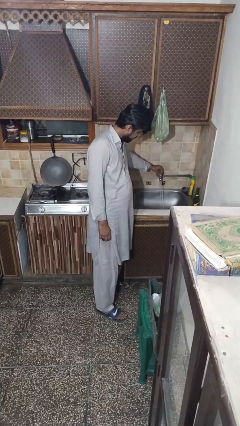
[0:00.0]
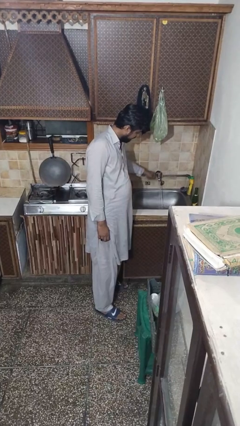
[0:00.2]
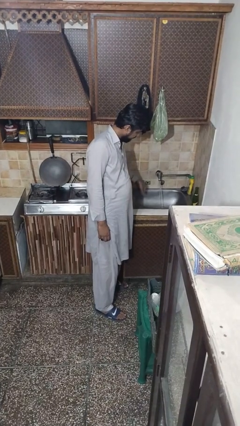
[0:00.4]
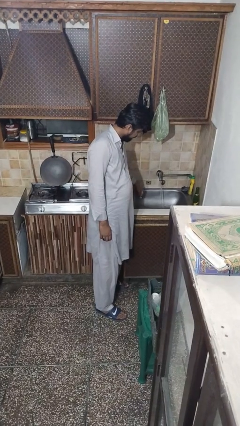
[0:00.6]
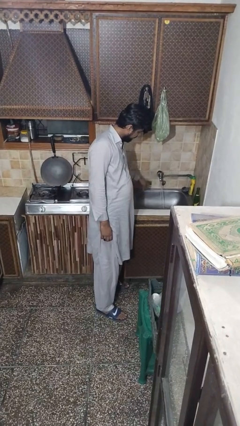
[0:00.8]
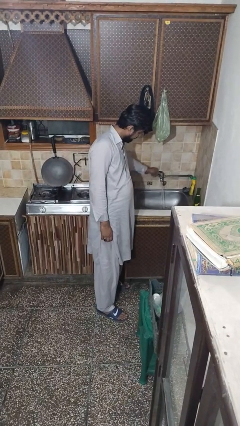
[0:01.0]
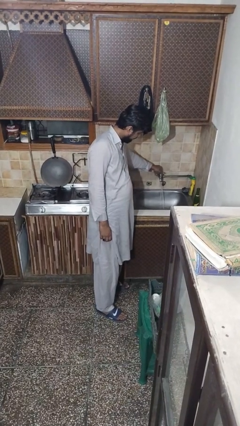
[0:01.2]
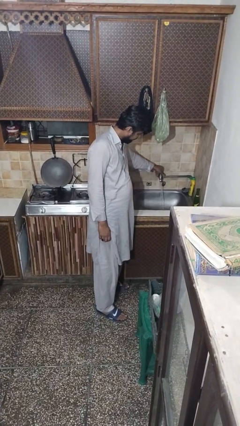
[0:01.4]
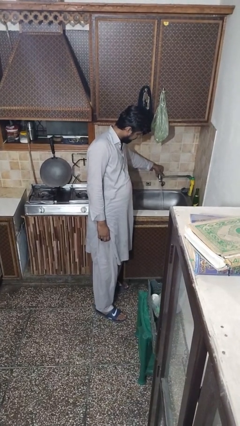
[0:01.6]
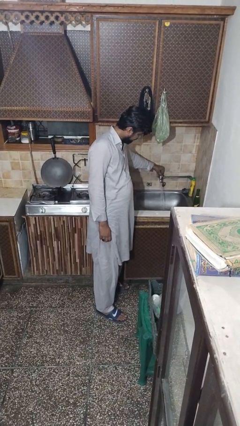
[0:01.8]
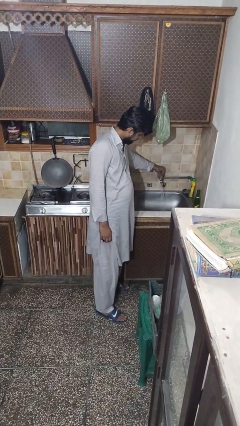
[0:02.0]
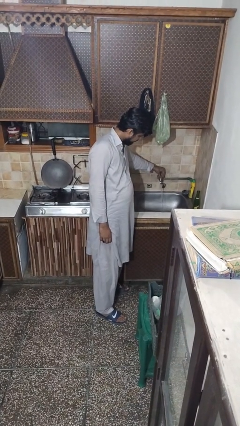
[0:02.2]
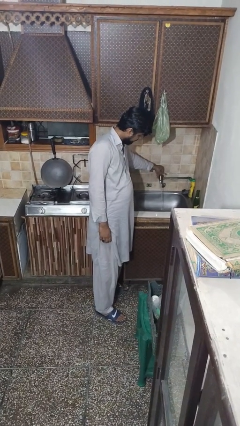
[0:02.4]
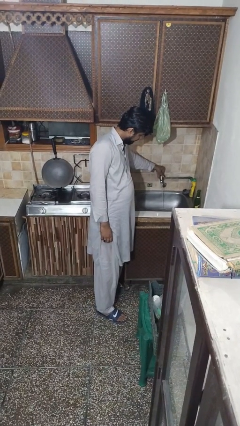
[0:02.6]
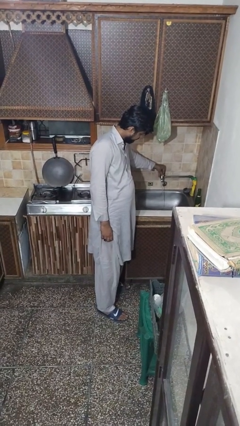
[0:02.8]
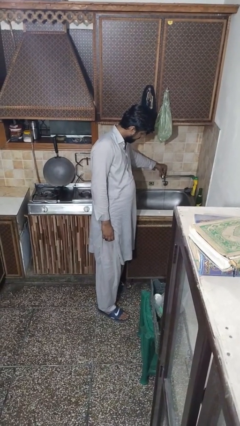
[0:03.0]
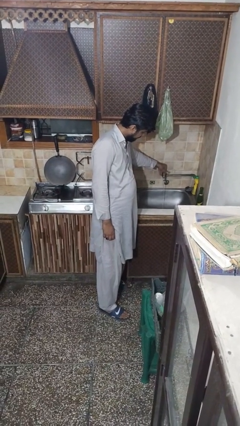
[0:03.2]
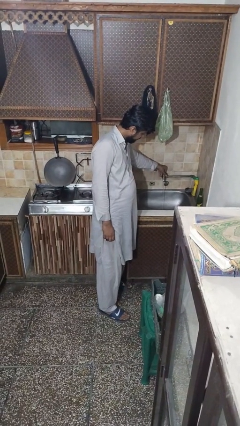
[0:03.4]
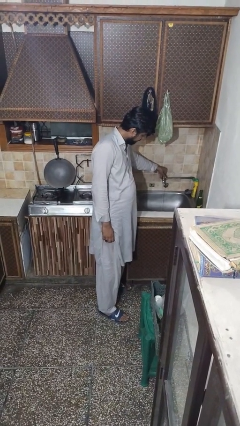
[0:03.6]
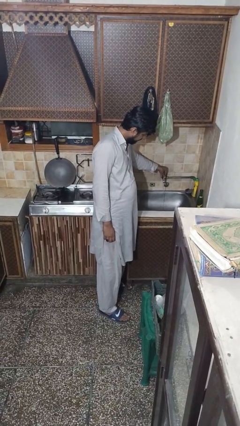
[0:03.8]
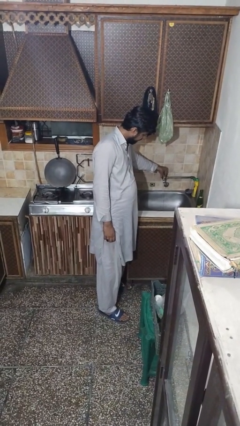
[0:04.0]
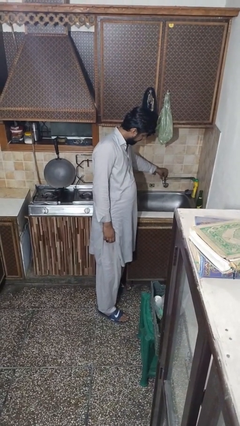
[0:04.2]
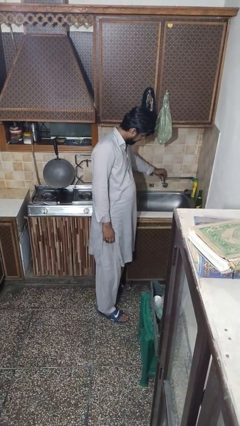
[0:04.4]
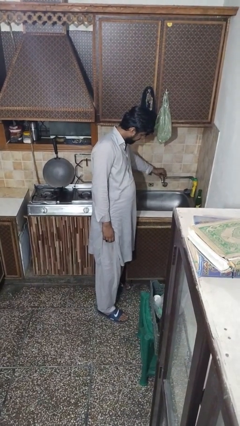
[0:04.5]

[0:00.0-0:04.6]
person turns off faucet

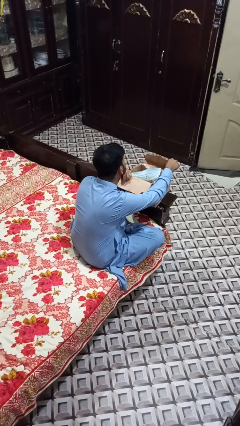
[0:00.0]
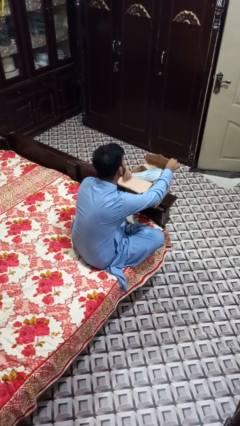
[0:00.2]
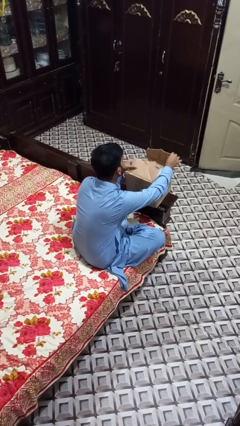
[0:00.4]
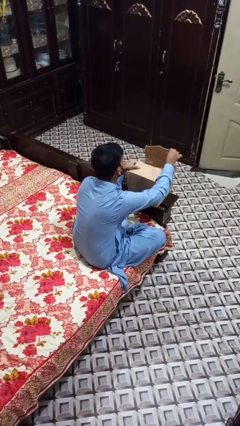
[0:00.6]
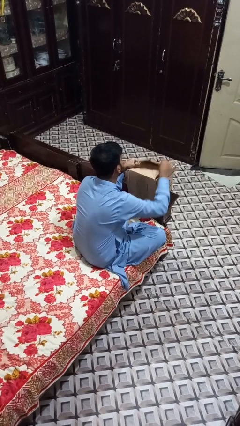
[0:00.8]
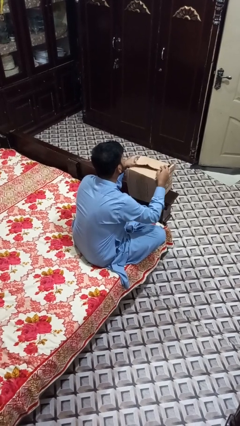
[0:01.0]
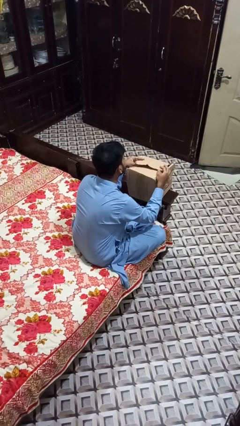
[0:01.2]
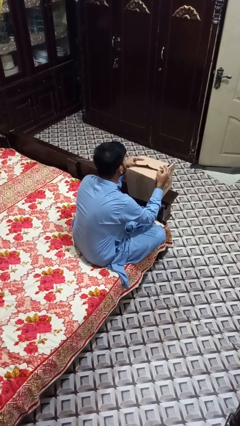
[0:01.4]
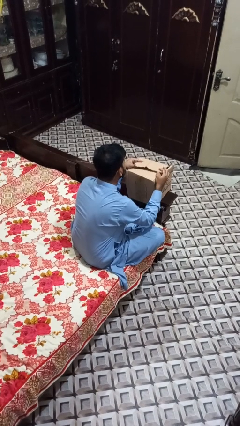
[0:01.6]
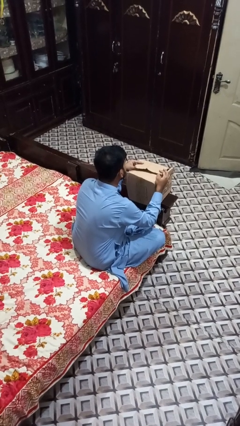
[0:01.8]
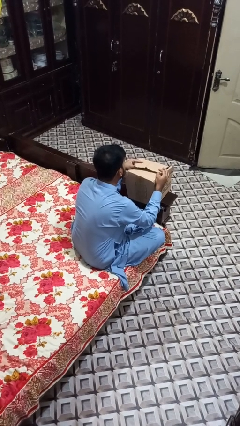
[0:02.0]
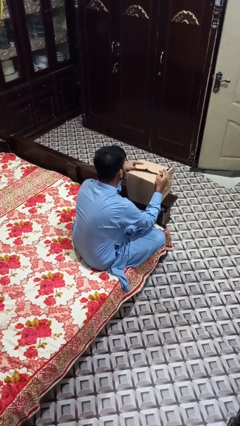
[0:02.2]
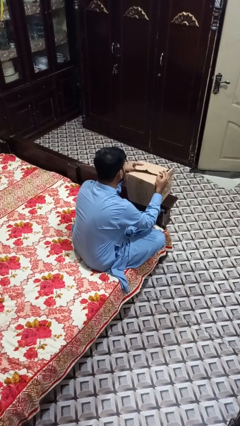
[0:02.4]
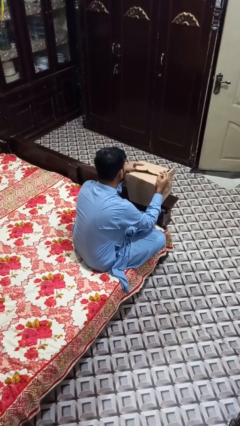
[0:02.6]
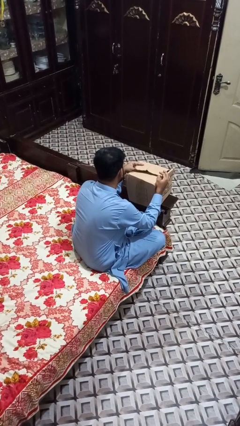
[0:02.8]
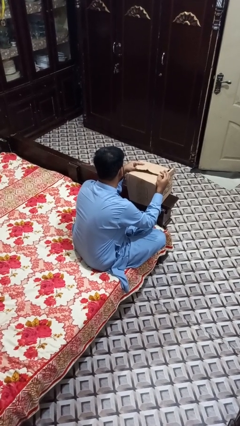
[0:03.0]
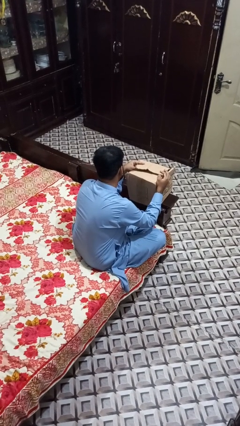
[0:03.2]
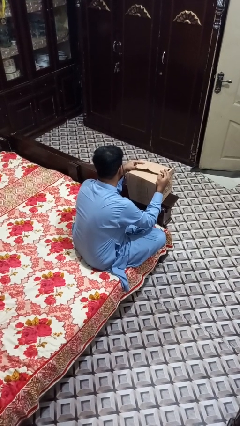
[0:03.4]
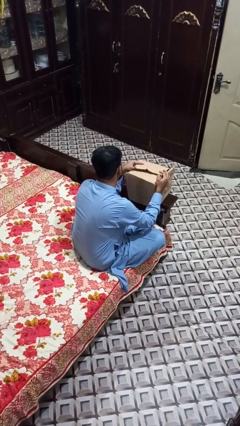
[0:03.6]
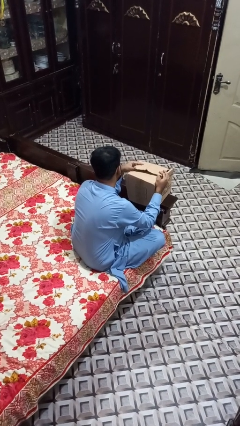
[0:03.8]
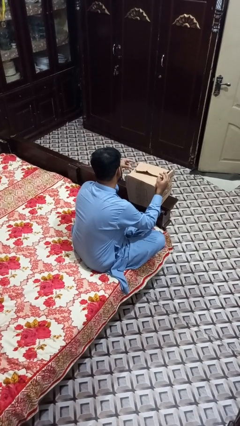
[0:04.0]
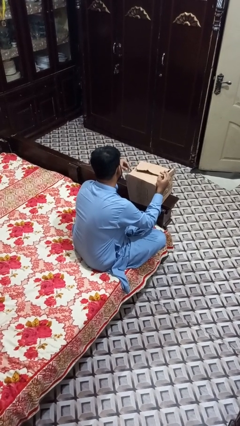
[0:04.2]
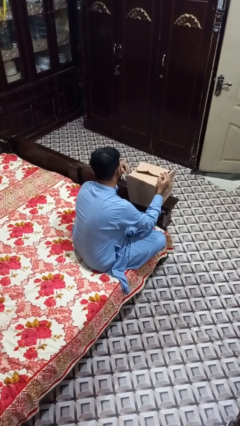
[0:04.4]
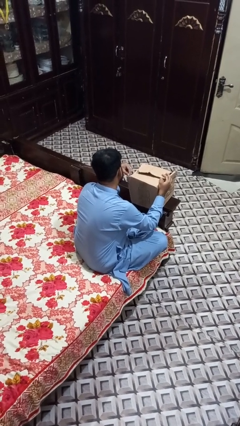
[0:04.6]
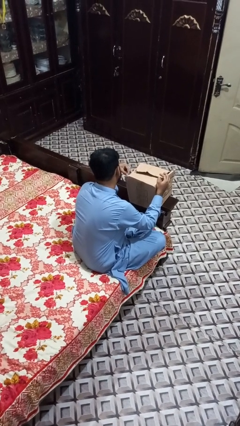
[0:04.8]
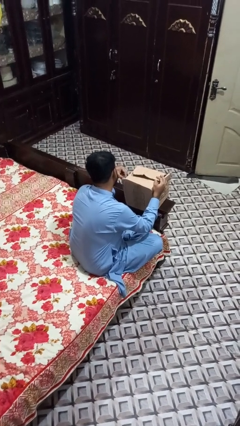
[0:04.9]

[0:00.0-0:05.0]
person closes box

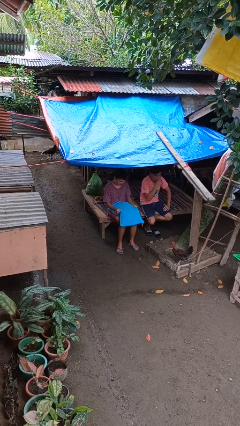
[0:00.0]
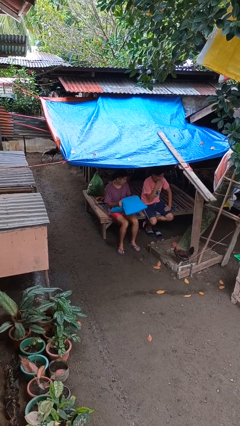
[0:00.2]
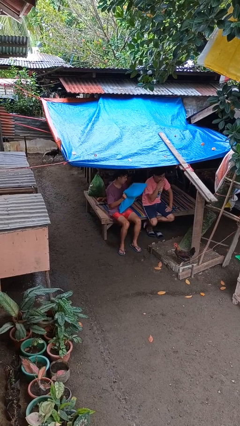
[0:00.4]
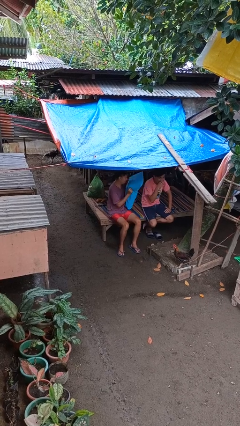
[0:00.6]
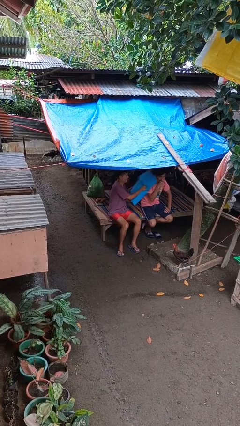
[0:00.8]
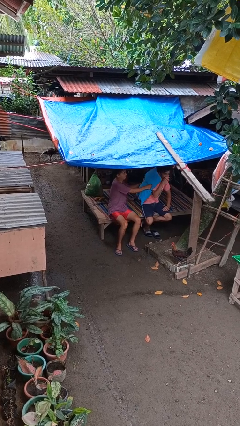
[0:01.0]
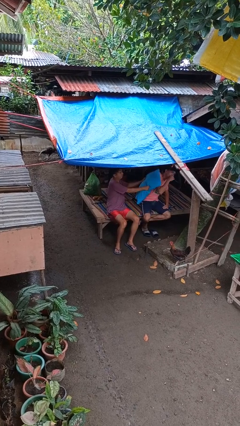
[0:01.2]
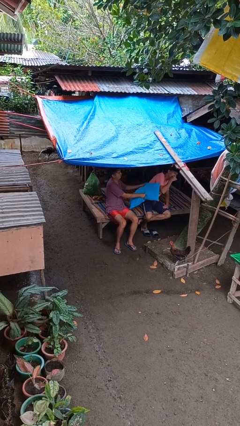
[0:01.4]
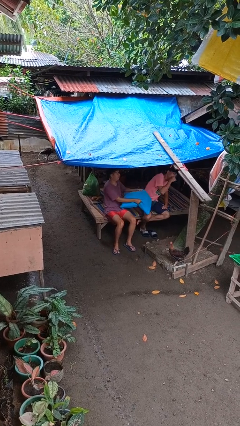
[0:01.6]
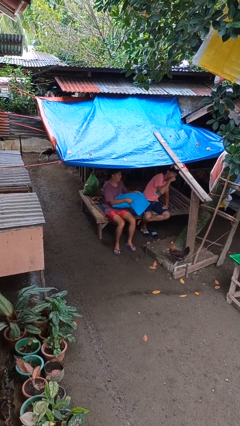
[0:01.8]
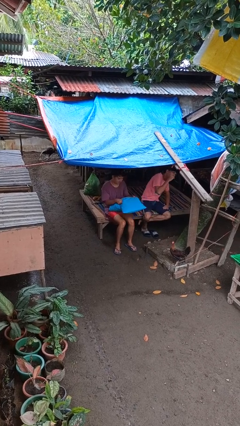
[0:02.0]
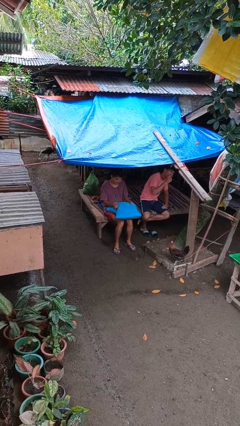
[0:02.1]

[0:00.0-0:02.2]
person hits person with pillow

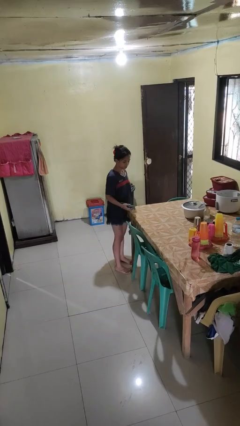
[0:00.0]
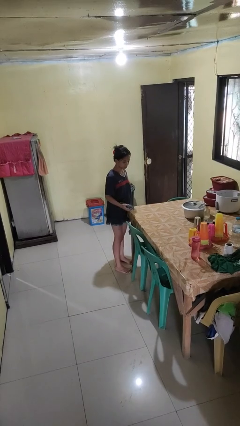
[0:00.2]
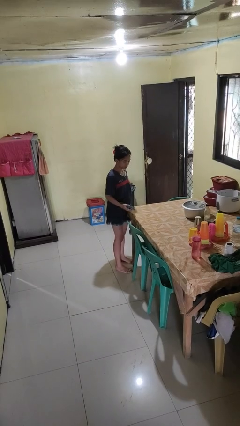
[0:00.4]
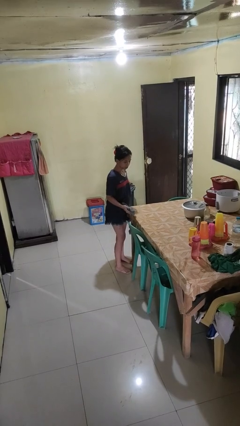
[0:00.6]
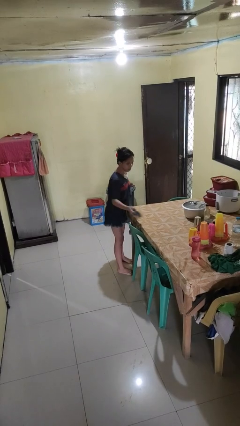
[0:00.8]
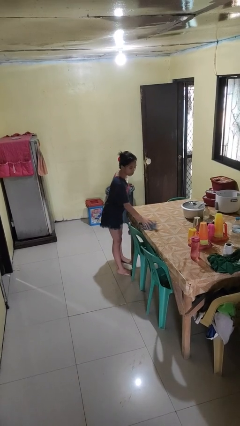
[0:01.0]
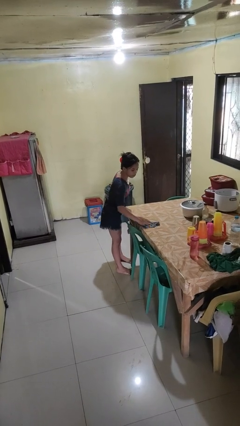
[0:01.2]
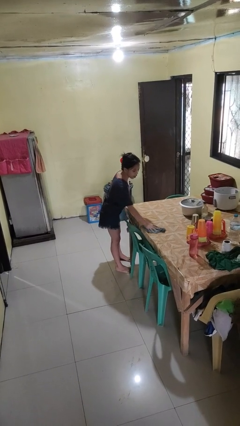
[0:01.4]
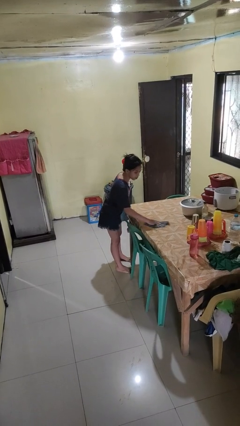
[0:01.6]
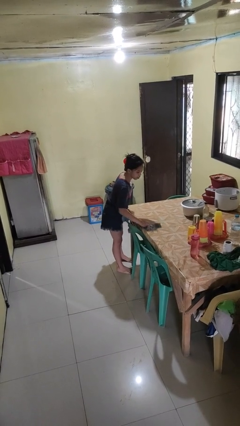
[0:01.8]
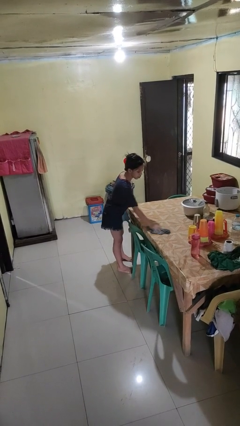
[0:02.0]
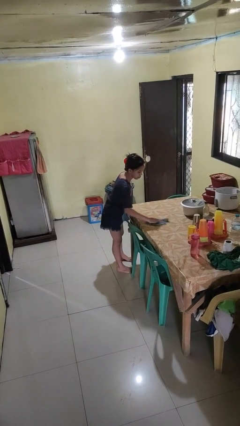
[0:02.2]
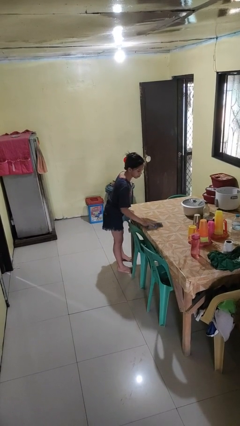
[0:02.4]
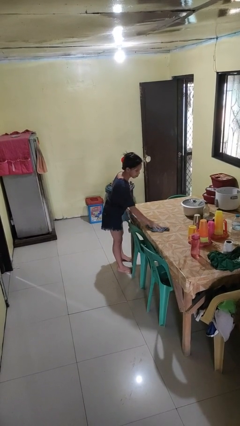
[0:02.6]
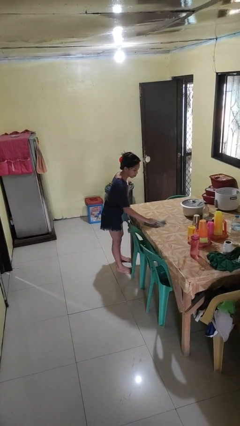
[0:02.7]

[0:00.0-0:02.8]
person cleans table with rag

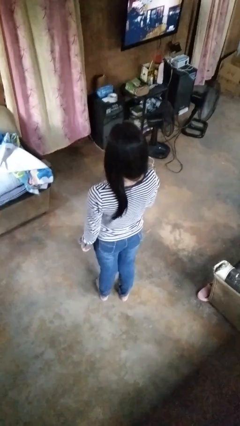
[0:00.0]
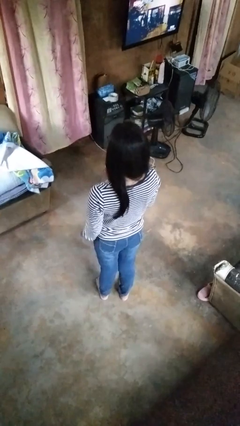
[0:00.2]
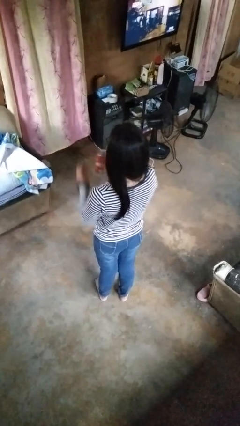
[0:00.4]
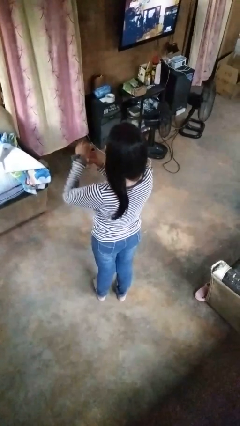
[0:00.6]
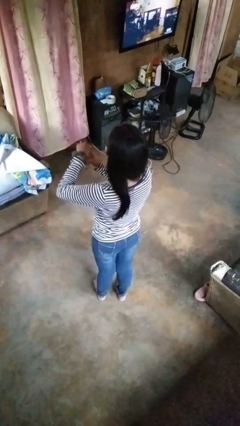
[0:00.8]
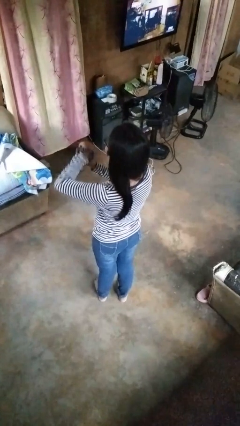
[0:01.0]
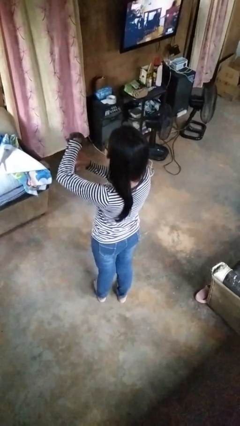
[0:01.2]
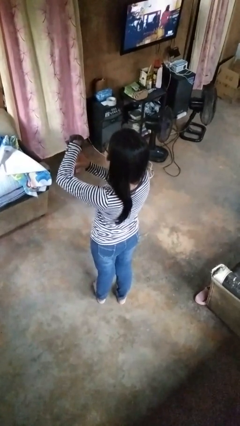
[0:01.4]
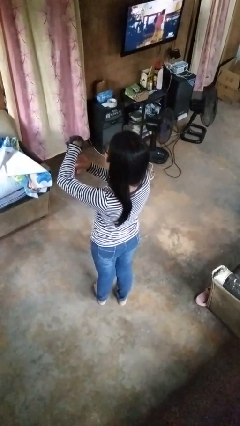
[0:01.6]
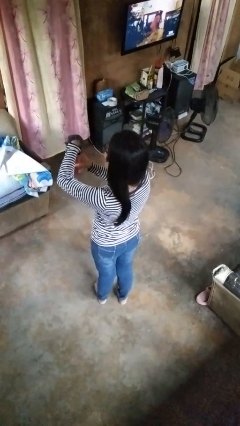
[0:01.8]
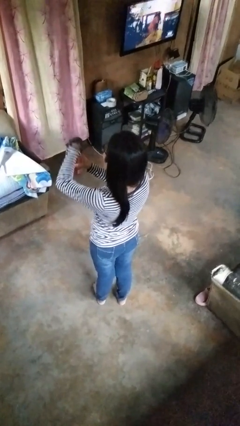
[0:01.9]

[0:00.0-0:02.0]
person opens beverage can

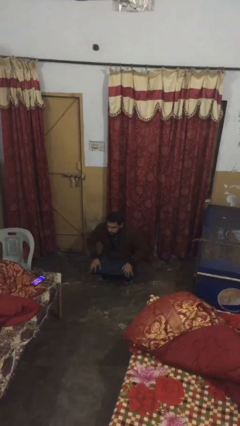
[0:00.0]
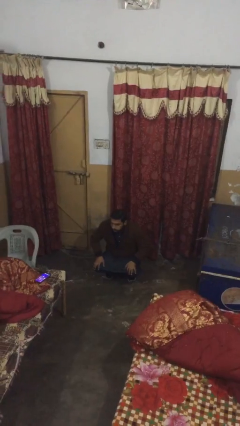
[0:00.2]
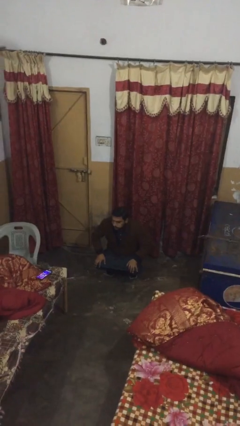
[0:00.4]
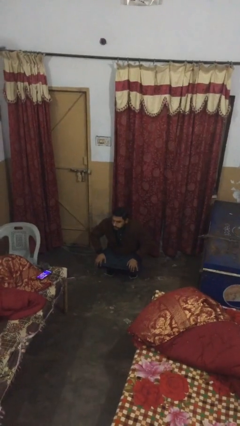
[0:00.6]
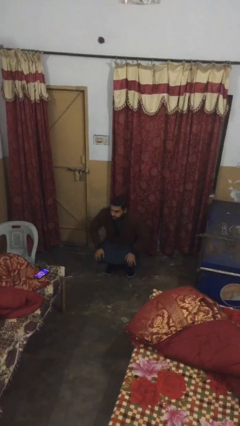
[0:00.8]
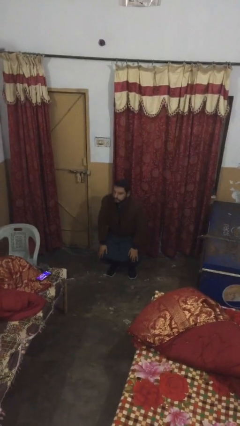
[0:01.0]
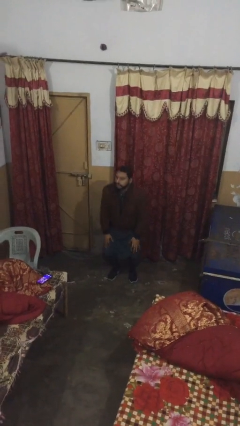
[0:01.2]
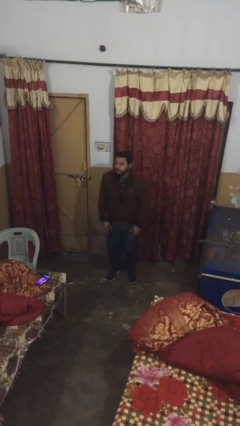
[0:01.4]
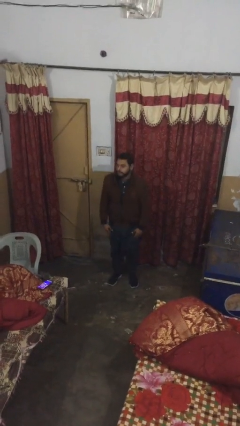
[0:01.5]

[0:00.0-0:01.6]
person stands up
